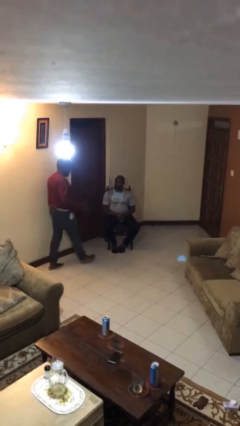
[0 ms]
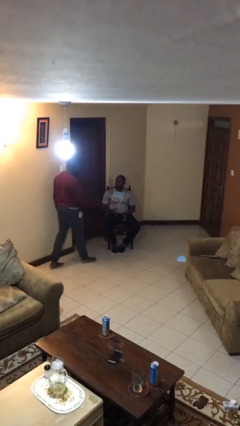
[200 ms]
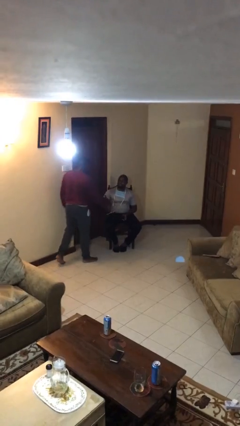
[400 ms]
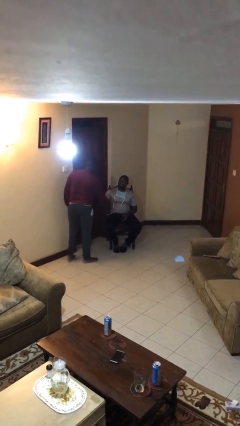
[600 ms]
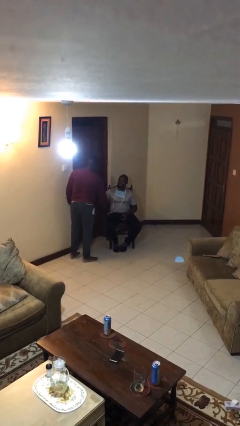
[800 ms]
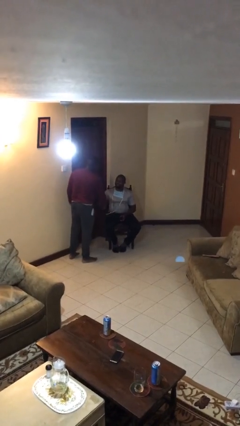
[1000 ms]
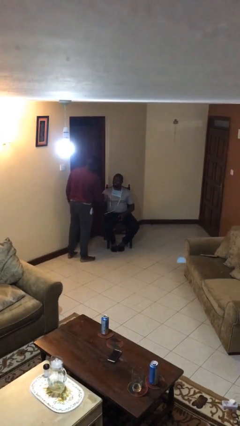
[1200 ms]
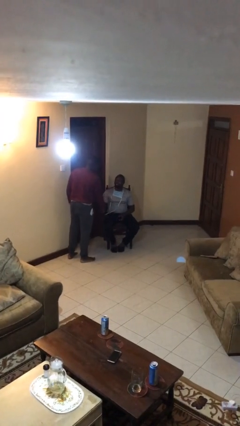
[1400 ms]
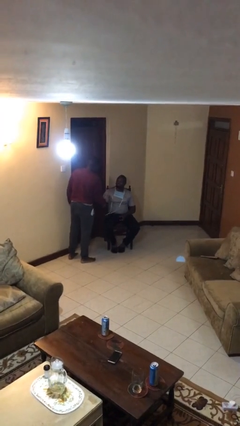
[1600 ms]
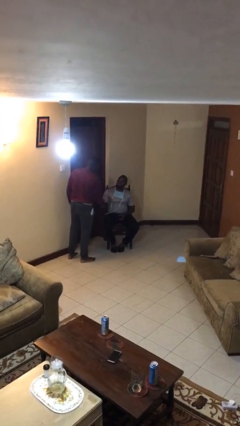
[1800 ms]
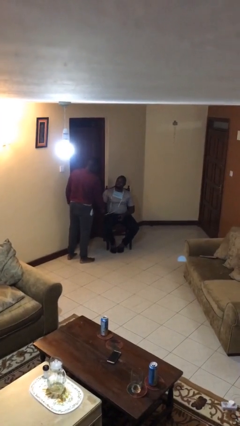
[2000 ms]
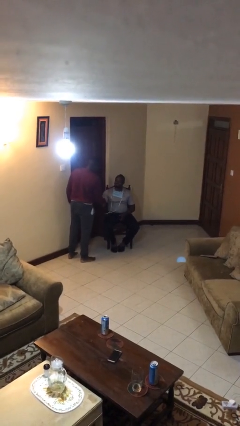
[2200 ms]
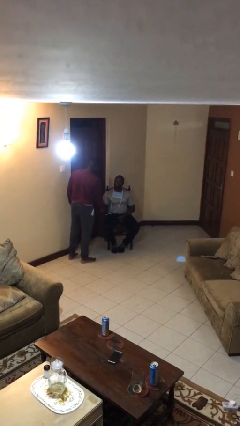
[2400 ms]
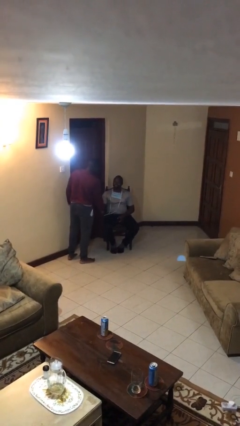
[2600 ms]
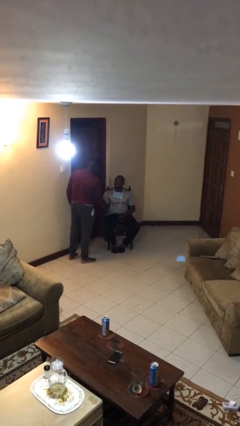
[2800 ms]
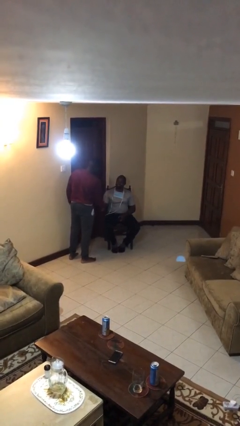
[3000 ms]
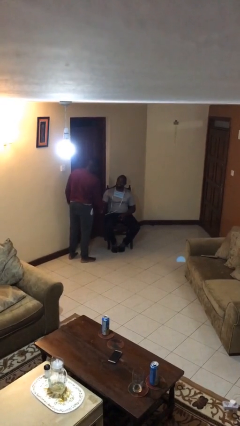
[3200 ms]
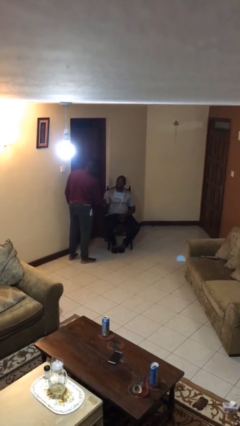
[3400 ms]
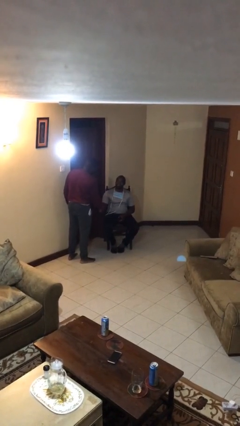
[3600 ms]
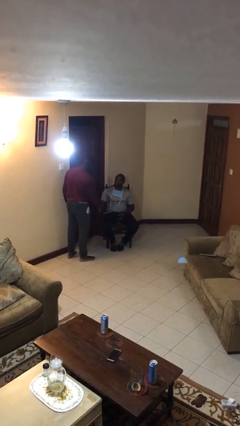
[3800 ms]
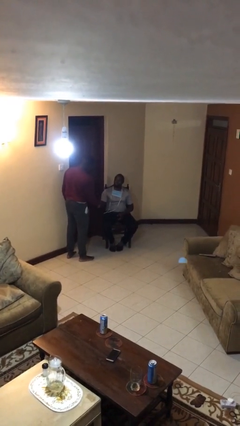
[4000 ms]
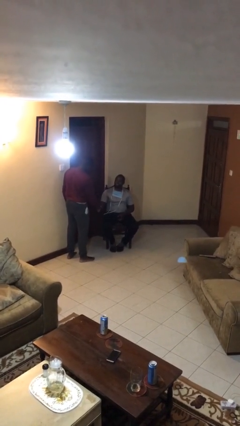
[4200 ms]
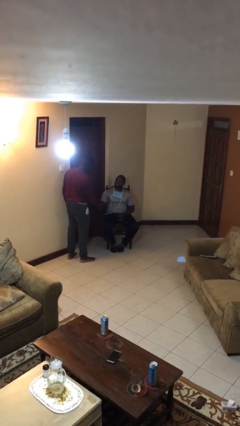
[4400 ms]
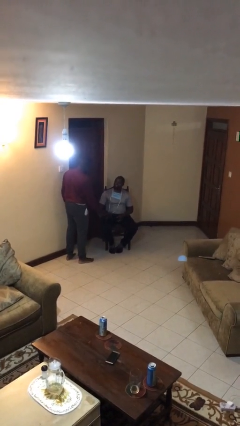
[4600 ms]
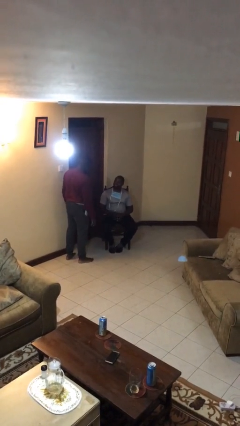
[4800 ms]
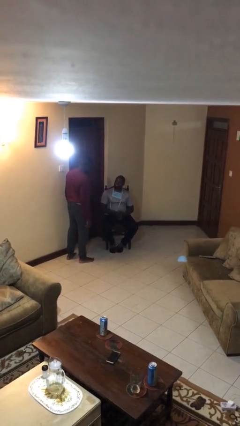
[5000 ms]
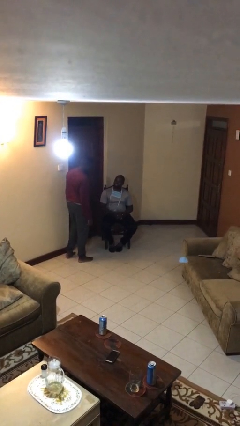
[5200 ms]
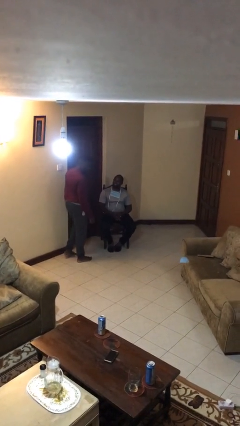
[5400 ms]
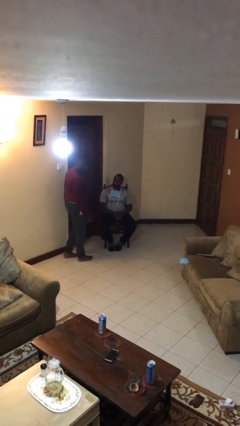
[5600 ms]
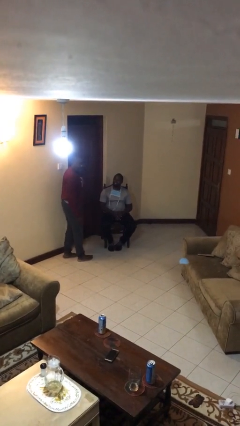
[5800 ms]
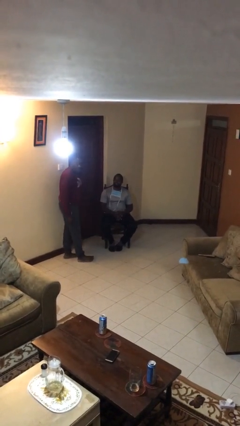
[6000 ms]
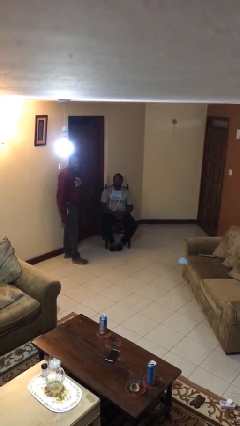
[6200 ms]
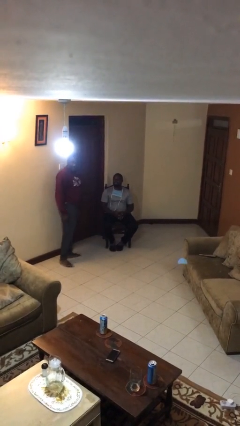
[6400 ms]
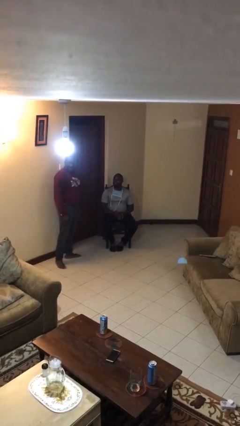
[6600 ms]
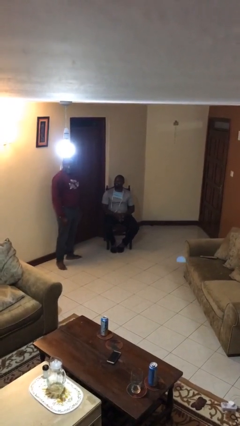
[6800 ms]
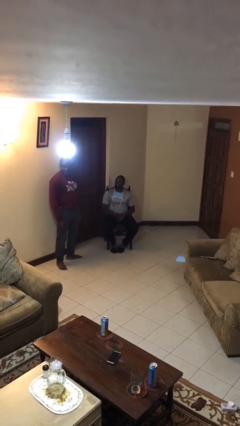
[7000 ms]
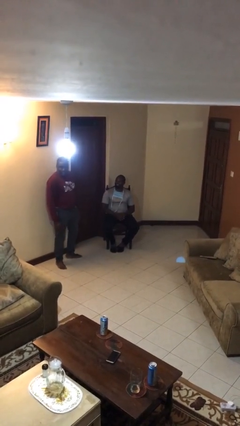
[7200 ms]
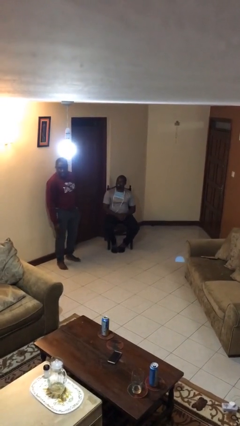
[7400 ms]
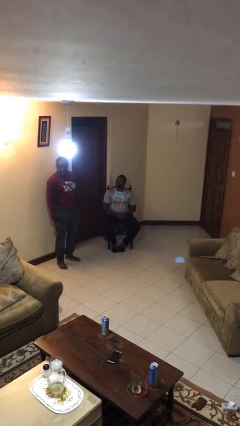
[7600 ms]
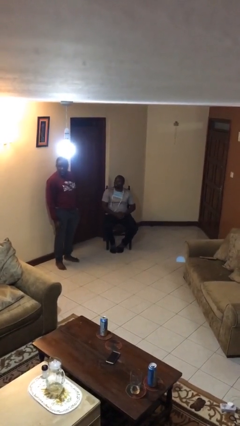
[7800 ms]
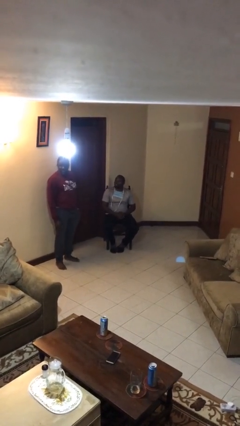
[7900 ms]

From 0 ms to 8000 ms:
person shakes hand

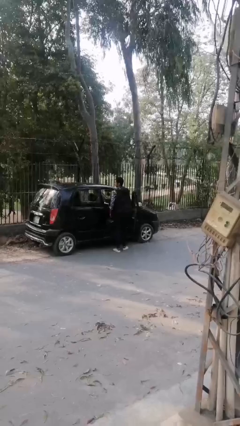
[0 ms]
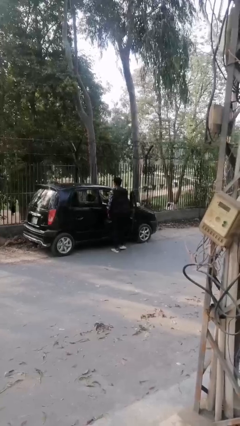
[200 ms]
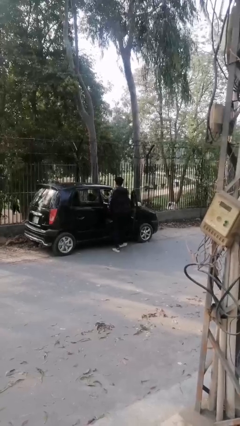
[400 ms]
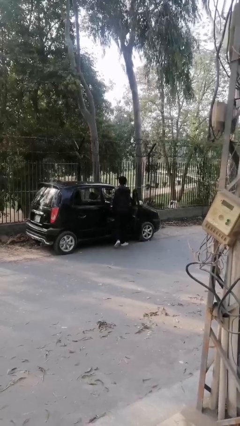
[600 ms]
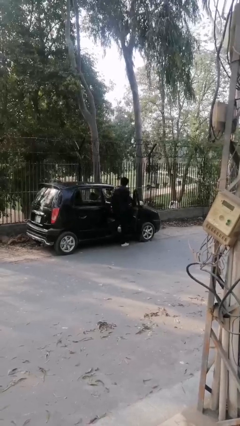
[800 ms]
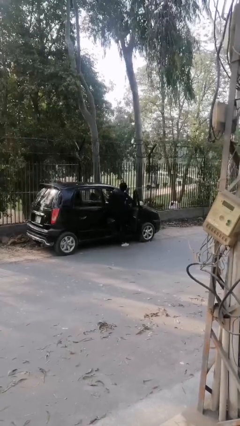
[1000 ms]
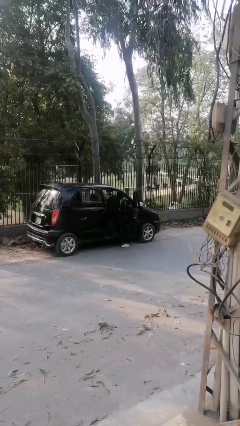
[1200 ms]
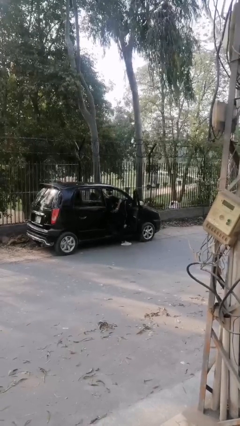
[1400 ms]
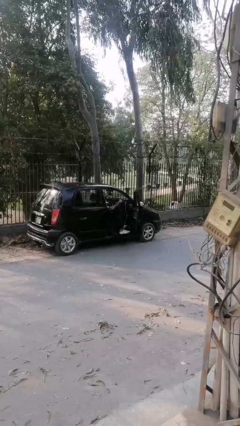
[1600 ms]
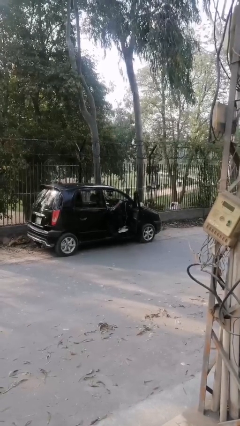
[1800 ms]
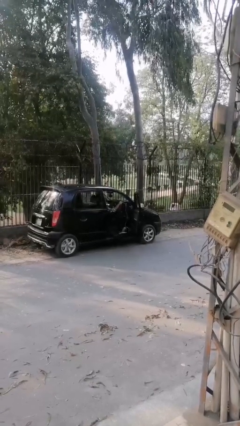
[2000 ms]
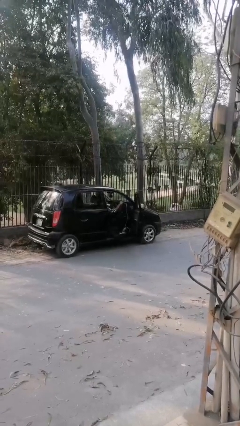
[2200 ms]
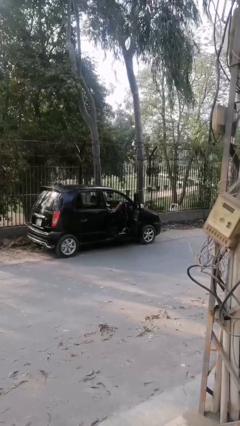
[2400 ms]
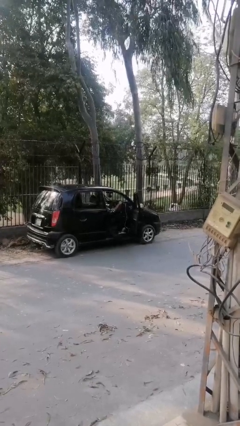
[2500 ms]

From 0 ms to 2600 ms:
person enters car

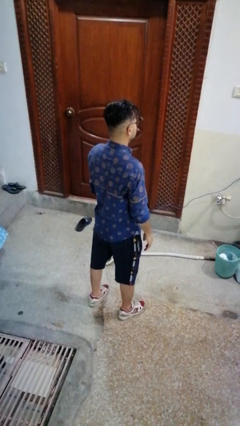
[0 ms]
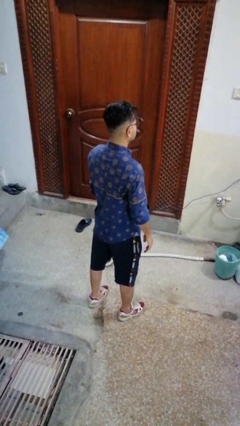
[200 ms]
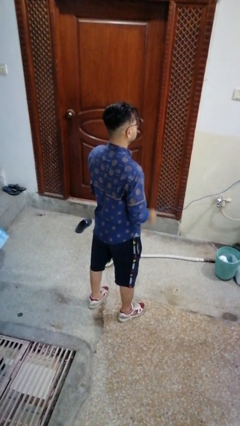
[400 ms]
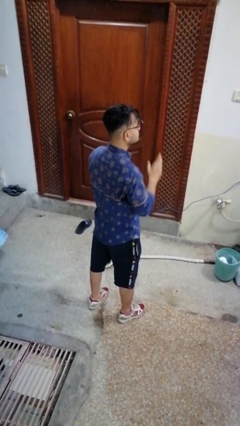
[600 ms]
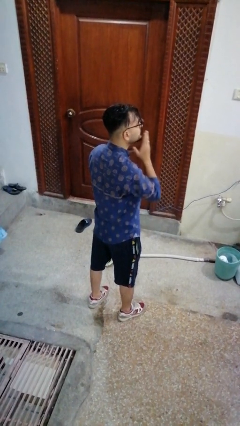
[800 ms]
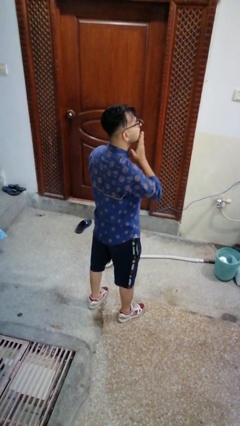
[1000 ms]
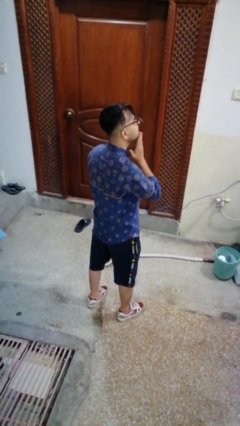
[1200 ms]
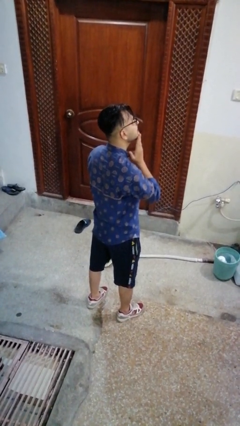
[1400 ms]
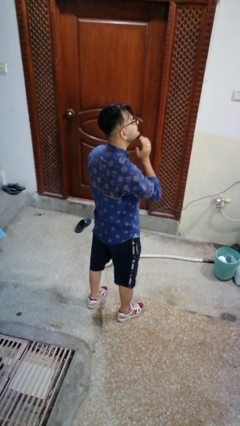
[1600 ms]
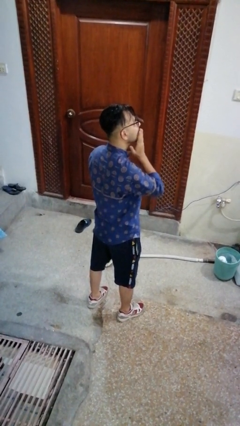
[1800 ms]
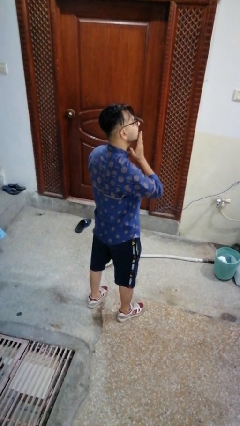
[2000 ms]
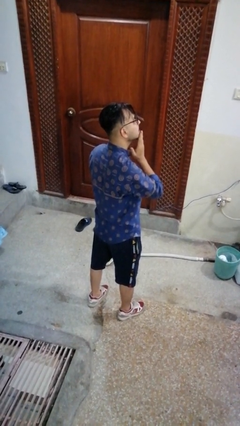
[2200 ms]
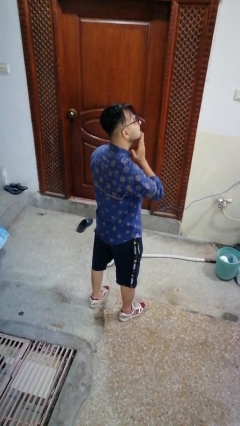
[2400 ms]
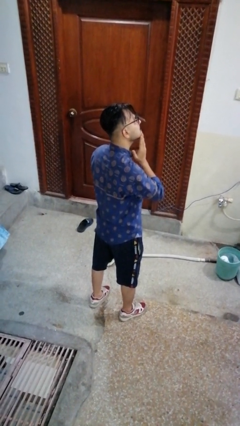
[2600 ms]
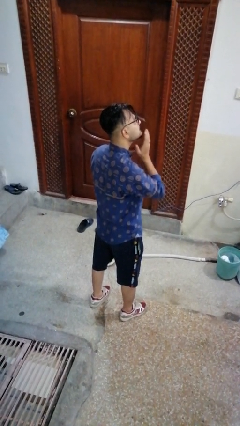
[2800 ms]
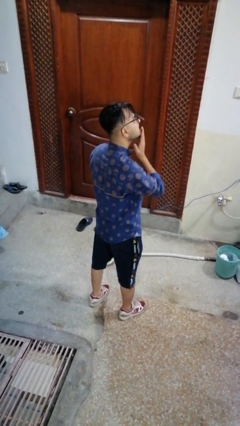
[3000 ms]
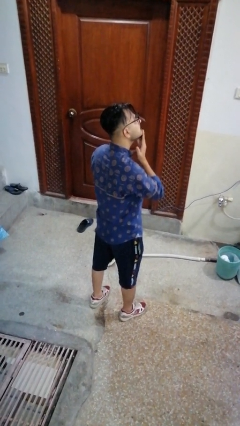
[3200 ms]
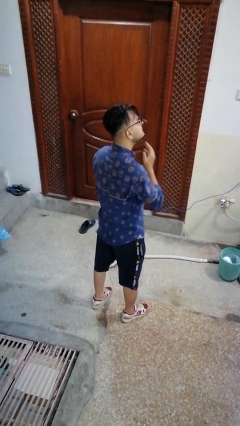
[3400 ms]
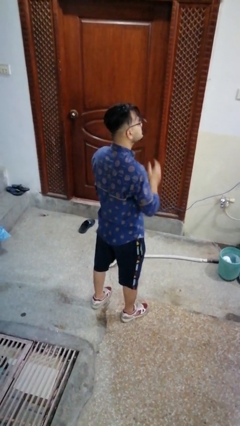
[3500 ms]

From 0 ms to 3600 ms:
person strokes chin

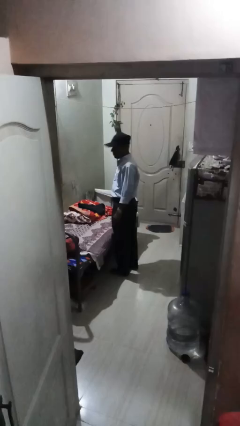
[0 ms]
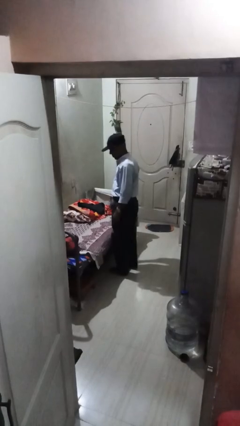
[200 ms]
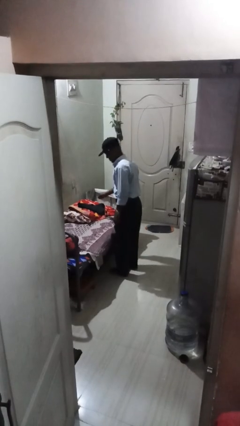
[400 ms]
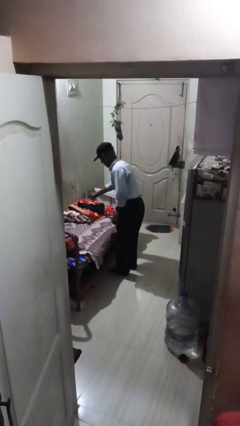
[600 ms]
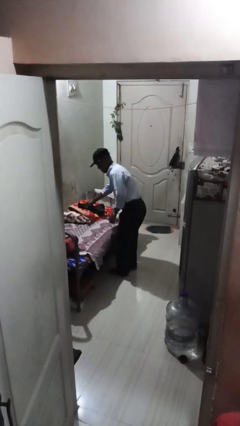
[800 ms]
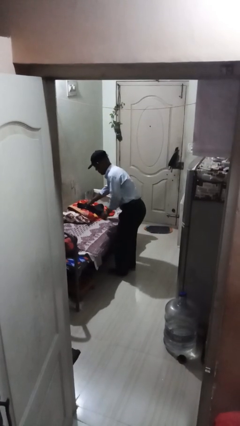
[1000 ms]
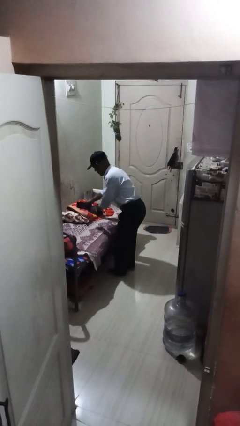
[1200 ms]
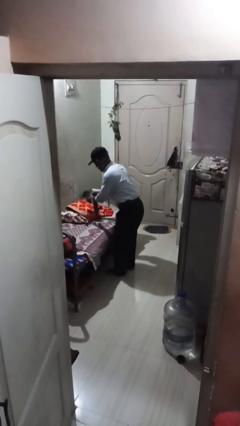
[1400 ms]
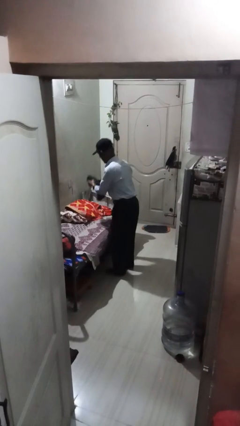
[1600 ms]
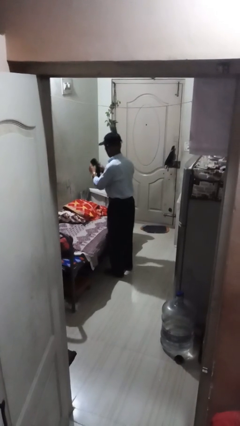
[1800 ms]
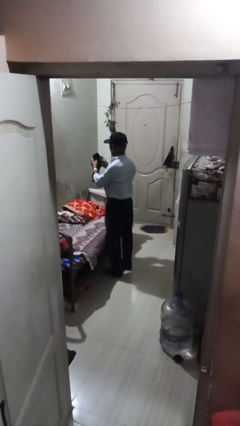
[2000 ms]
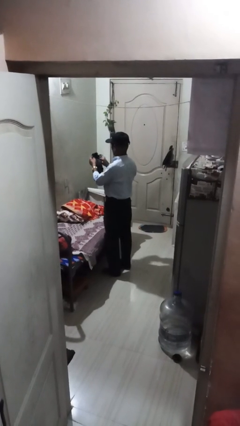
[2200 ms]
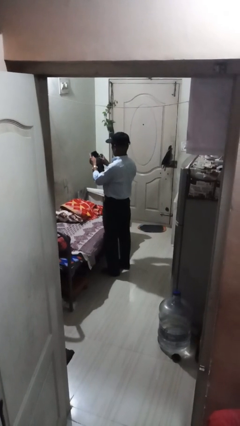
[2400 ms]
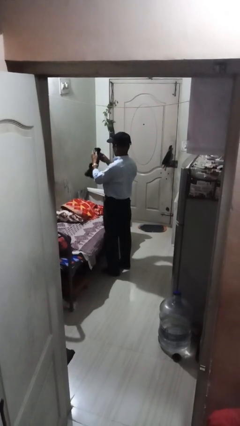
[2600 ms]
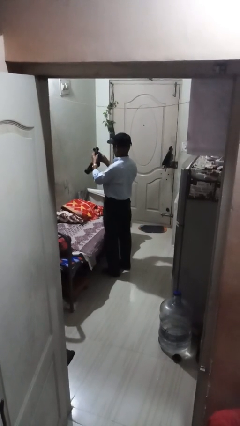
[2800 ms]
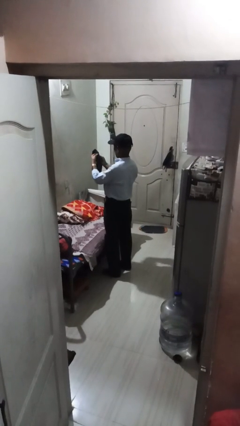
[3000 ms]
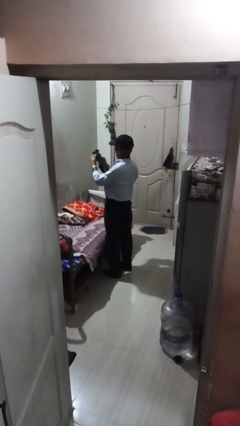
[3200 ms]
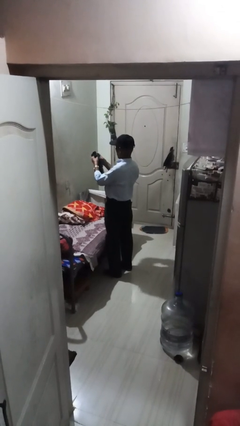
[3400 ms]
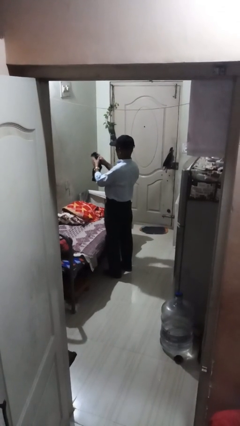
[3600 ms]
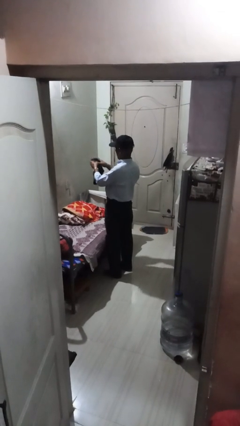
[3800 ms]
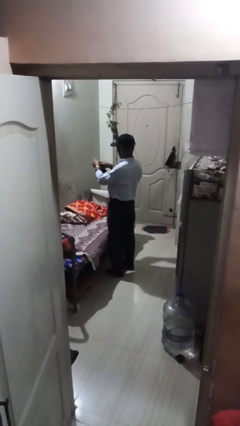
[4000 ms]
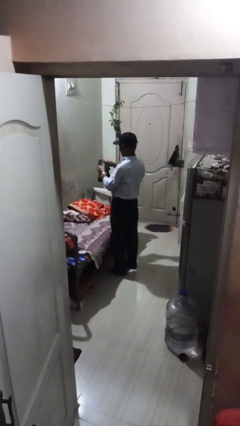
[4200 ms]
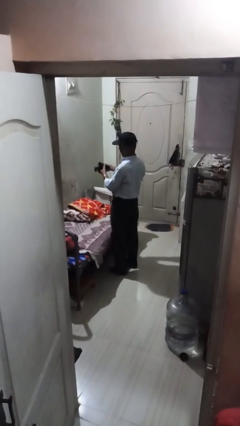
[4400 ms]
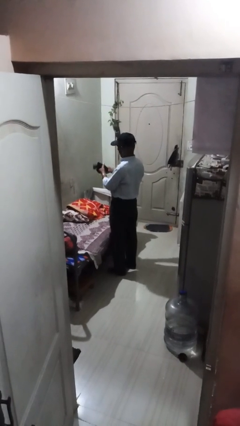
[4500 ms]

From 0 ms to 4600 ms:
person folds socks
